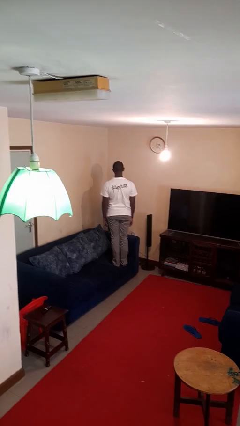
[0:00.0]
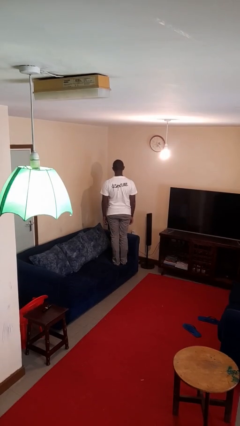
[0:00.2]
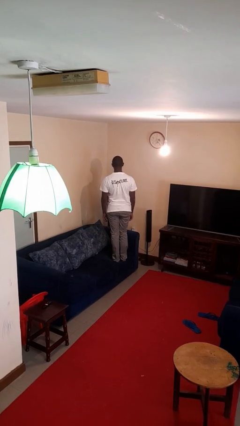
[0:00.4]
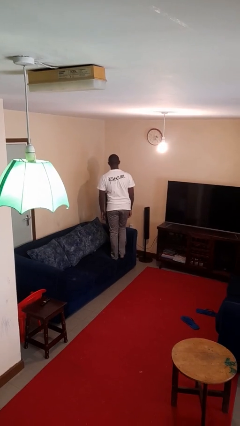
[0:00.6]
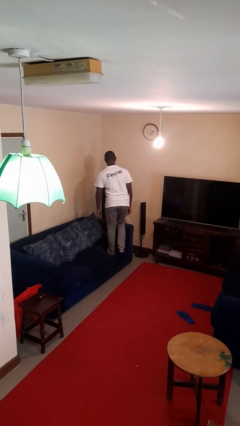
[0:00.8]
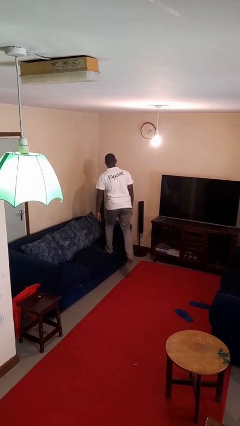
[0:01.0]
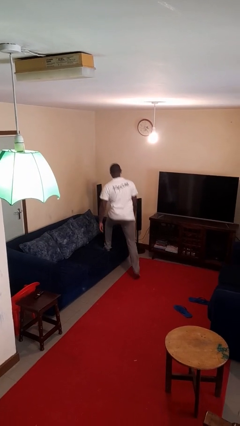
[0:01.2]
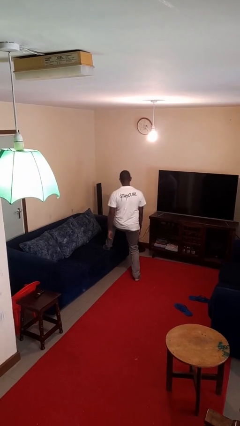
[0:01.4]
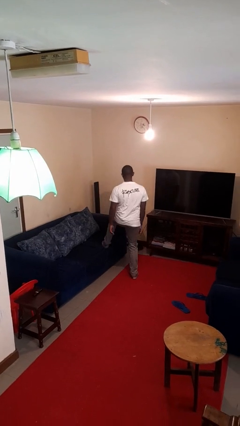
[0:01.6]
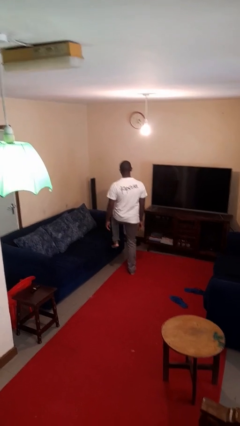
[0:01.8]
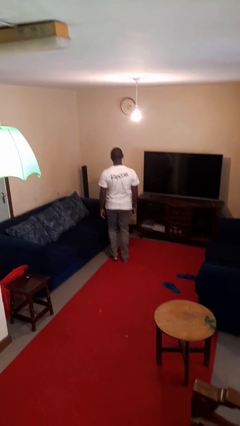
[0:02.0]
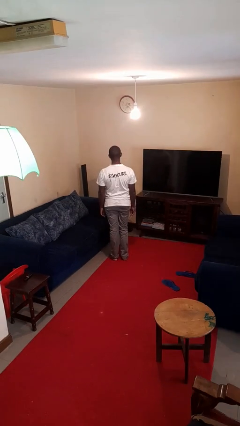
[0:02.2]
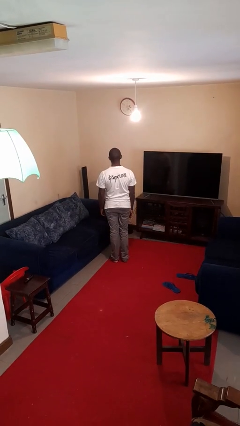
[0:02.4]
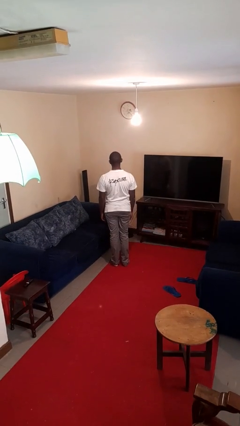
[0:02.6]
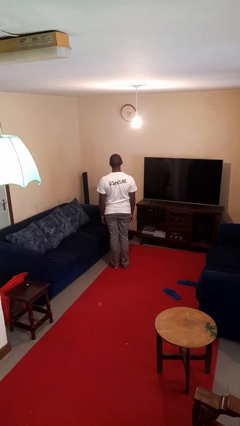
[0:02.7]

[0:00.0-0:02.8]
person climbs off couch

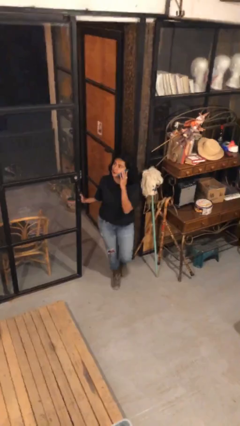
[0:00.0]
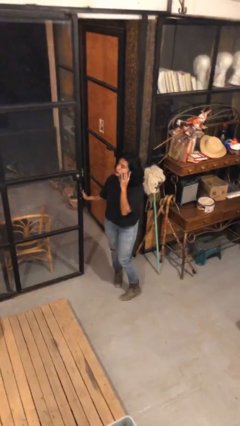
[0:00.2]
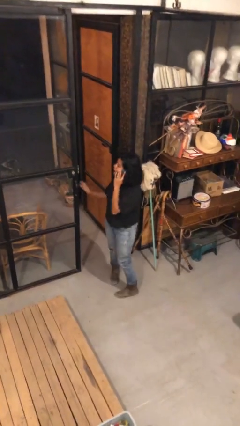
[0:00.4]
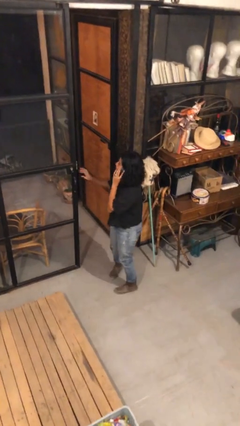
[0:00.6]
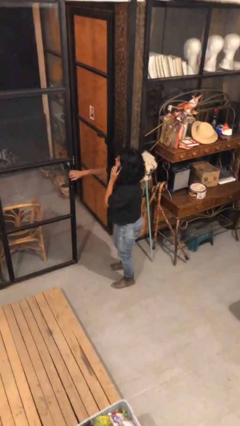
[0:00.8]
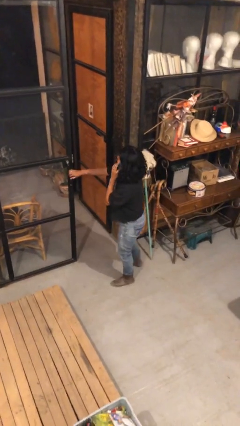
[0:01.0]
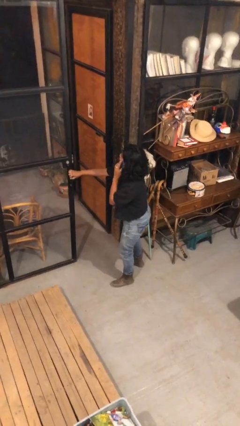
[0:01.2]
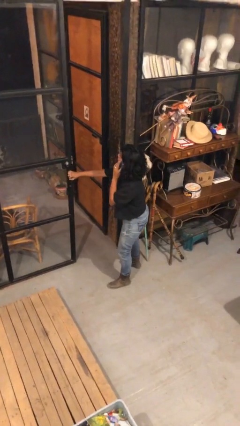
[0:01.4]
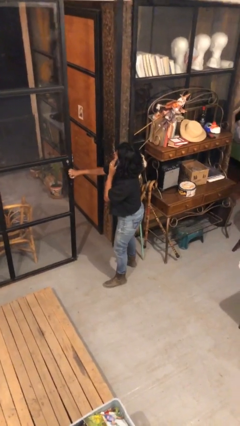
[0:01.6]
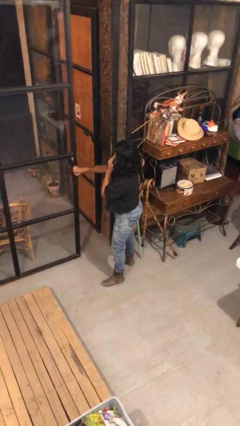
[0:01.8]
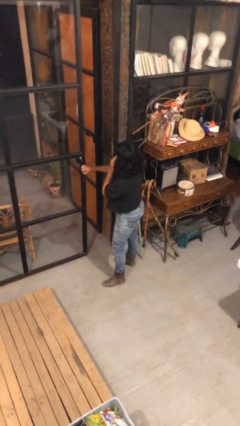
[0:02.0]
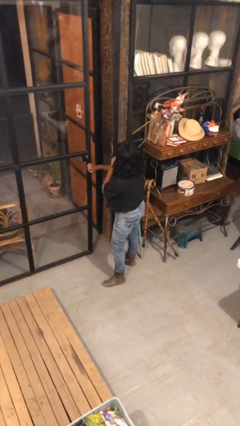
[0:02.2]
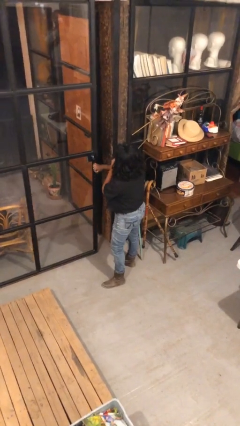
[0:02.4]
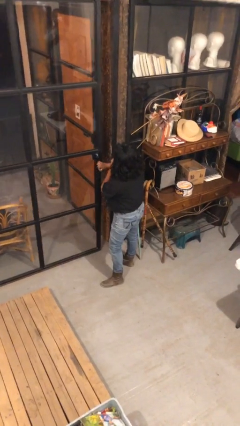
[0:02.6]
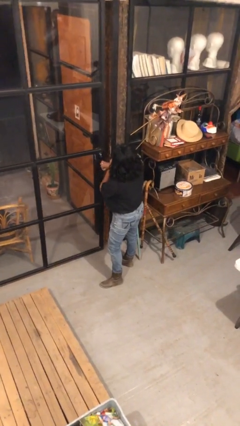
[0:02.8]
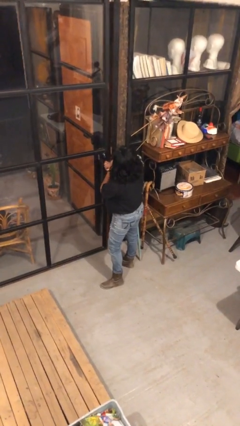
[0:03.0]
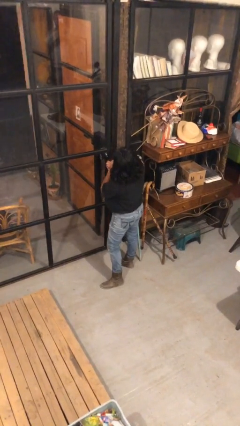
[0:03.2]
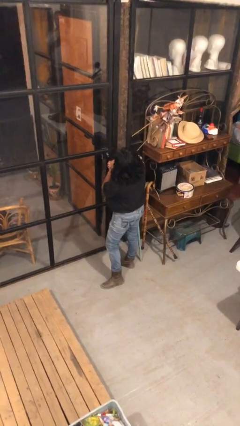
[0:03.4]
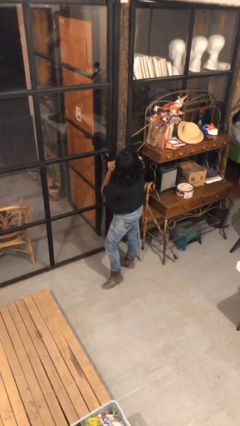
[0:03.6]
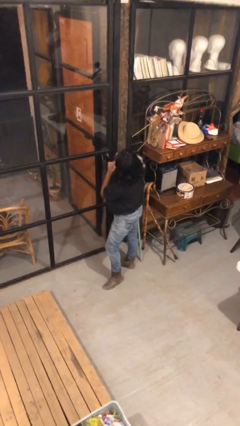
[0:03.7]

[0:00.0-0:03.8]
person closes facility door

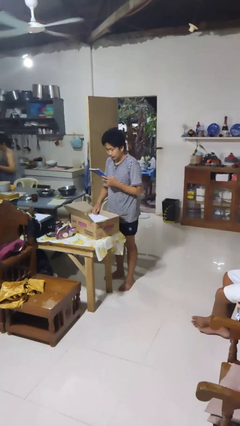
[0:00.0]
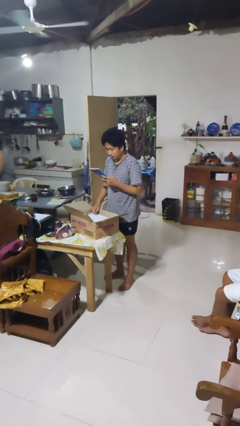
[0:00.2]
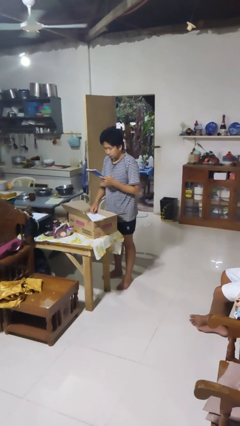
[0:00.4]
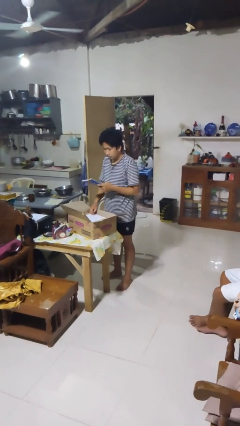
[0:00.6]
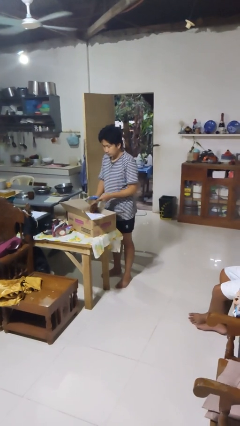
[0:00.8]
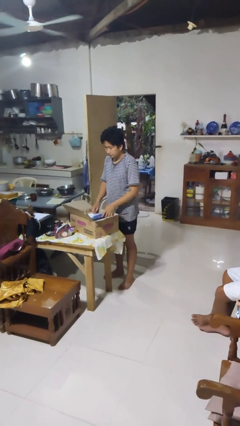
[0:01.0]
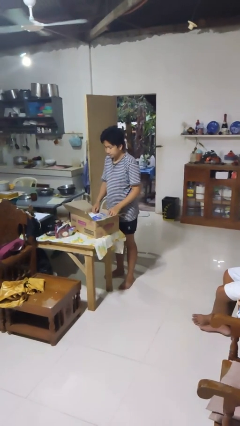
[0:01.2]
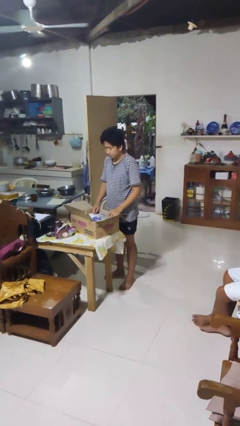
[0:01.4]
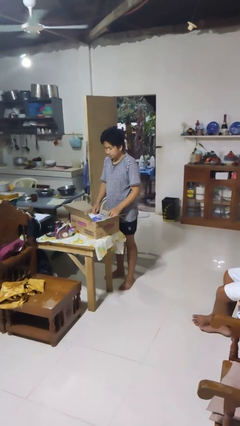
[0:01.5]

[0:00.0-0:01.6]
person puts object into box

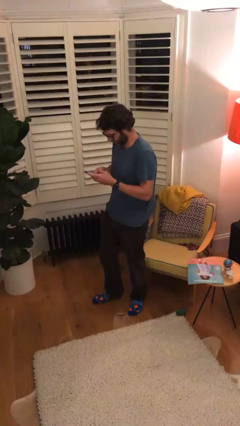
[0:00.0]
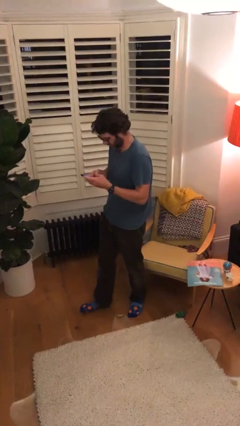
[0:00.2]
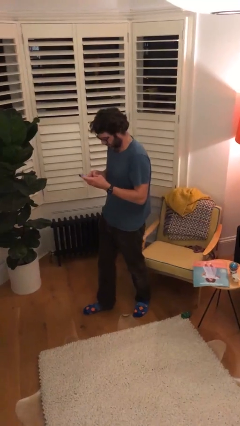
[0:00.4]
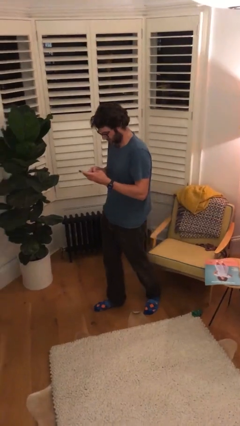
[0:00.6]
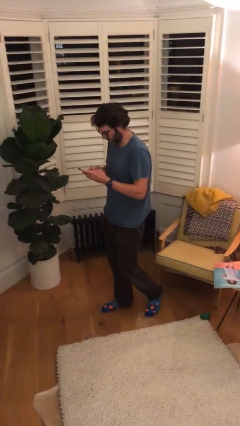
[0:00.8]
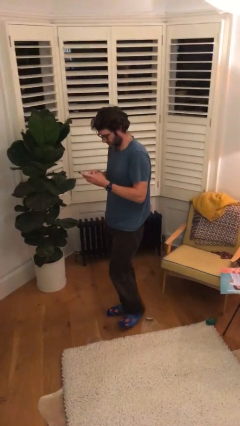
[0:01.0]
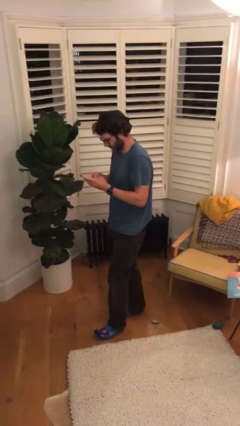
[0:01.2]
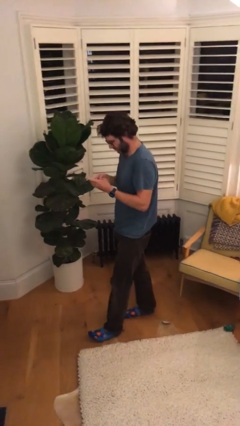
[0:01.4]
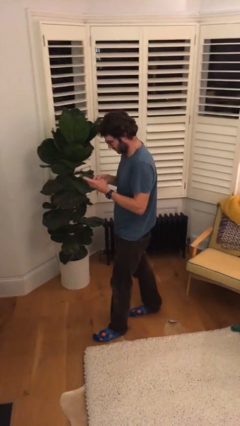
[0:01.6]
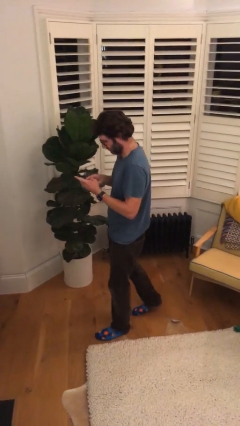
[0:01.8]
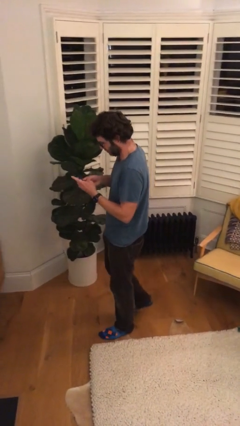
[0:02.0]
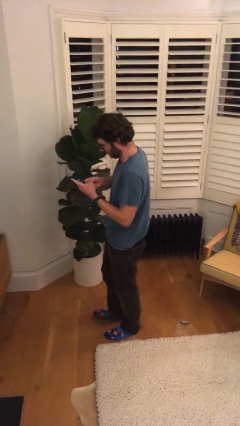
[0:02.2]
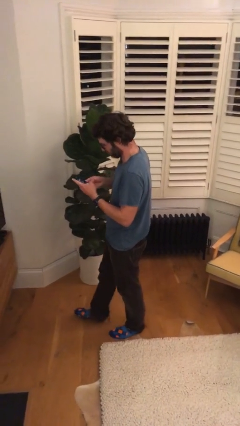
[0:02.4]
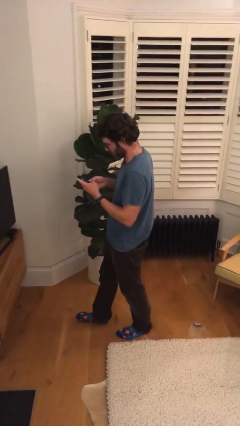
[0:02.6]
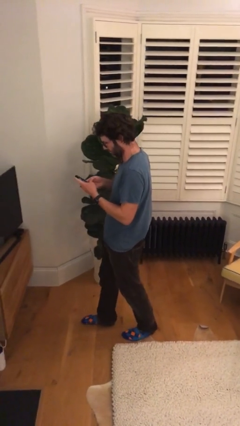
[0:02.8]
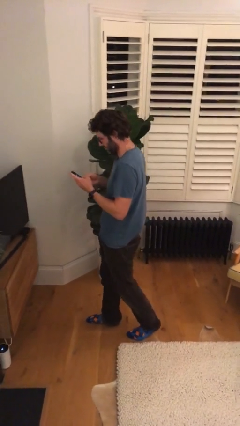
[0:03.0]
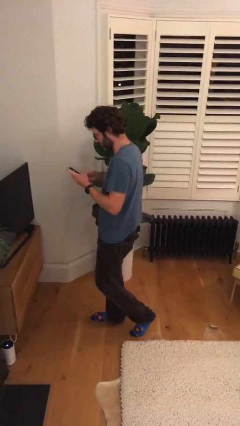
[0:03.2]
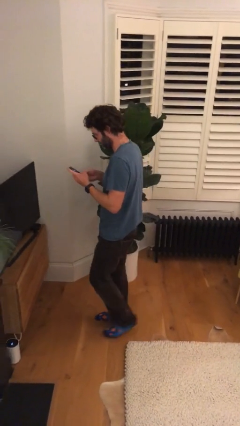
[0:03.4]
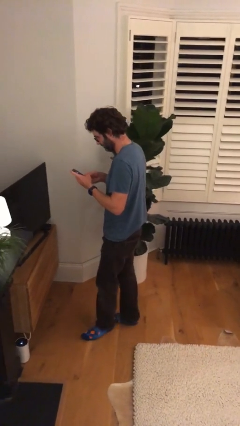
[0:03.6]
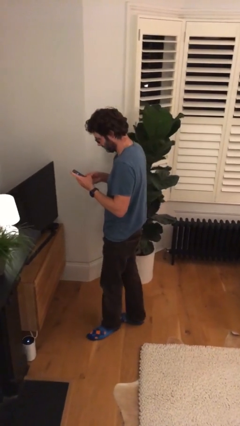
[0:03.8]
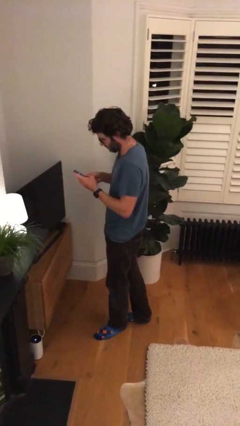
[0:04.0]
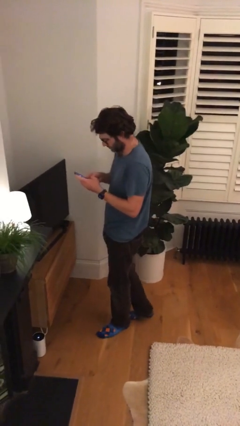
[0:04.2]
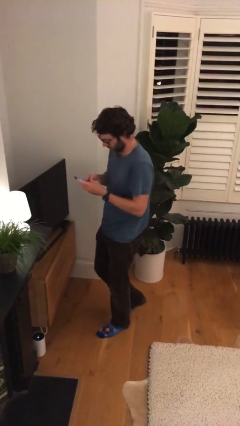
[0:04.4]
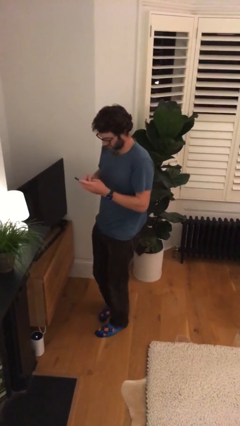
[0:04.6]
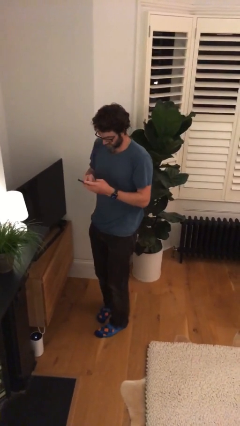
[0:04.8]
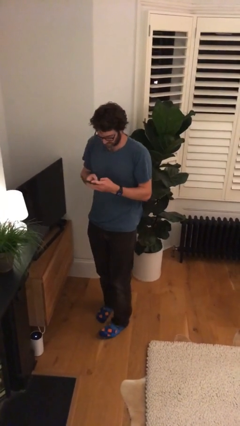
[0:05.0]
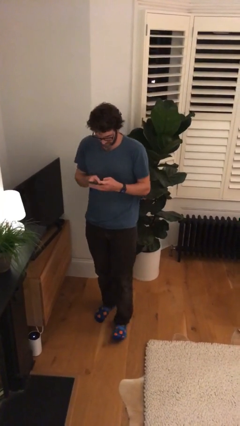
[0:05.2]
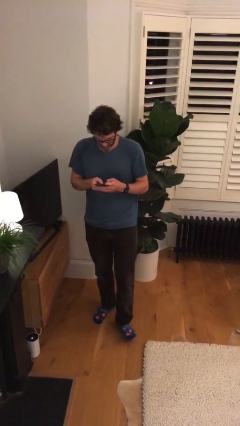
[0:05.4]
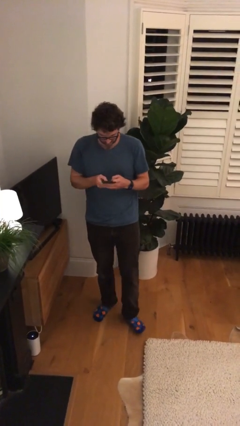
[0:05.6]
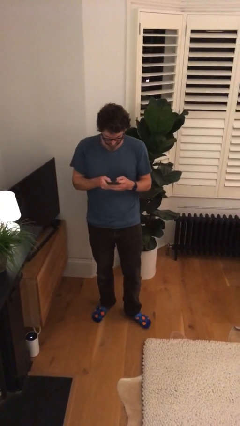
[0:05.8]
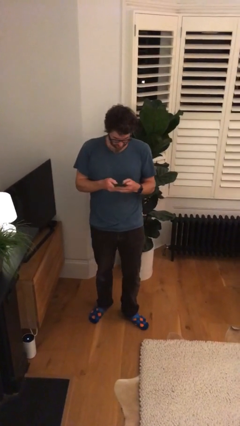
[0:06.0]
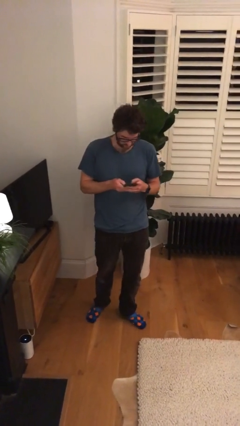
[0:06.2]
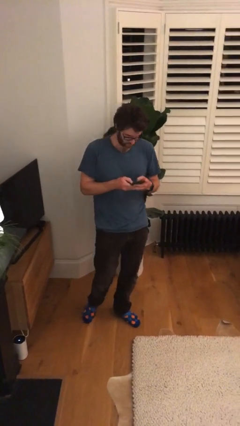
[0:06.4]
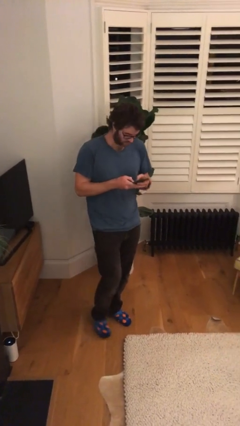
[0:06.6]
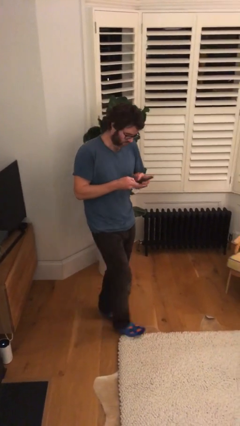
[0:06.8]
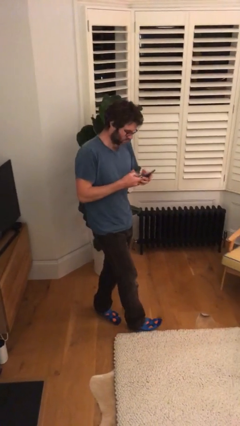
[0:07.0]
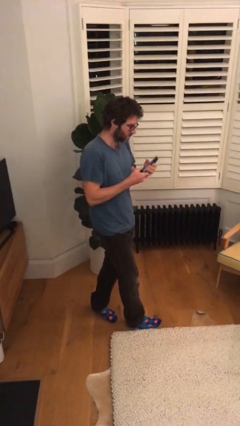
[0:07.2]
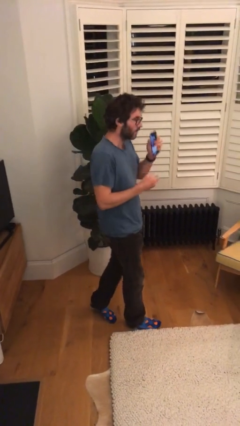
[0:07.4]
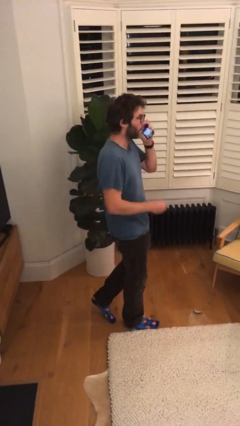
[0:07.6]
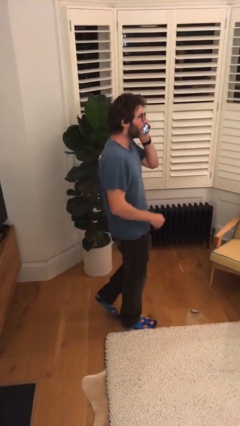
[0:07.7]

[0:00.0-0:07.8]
person texts on phone

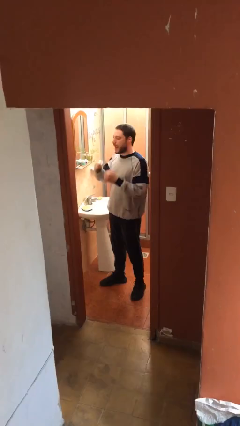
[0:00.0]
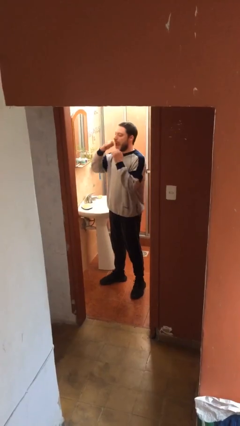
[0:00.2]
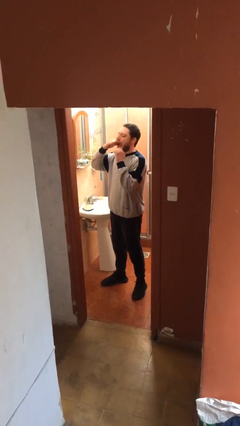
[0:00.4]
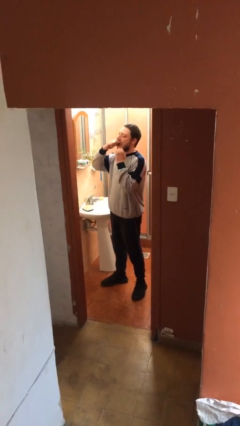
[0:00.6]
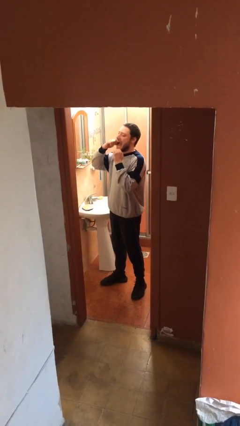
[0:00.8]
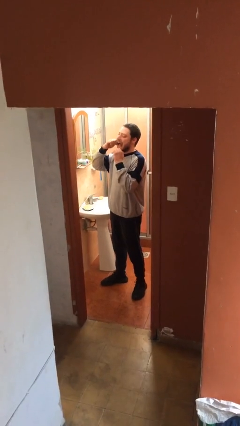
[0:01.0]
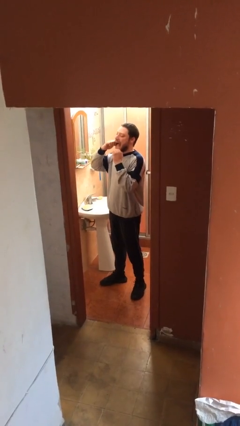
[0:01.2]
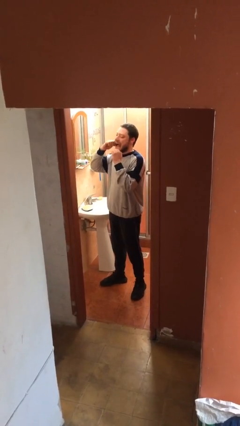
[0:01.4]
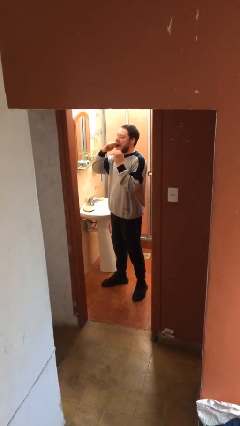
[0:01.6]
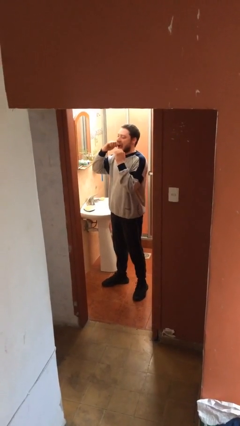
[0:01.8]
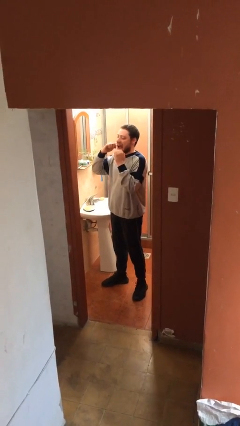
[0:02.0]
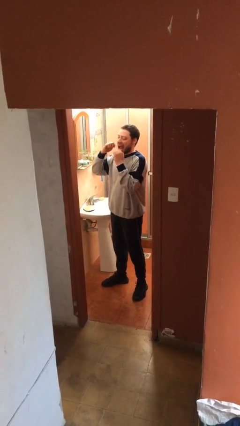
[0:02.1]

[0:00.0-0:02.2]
person flosses
